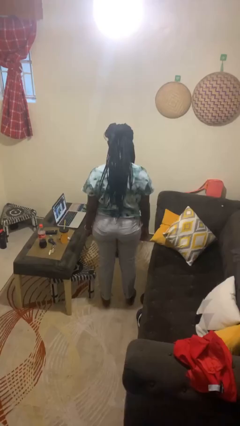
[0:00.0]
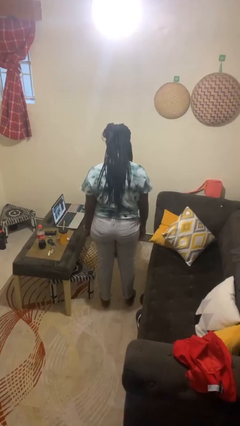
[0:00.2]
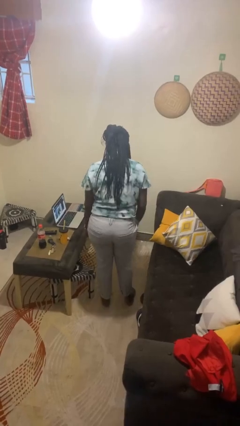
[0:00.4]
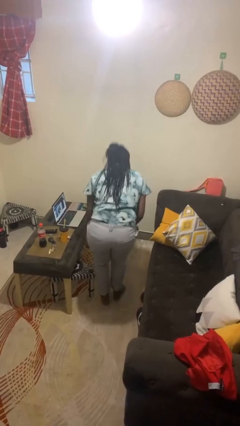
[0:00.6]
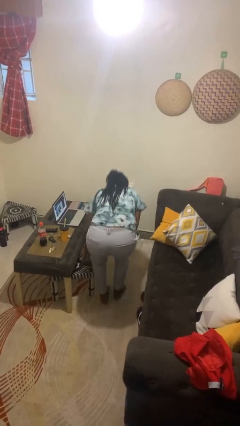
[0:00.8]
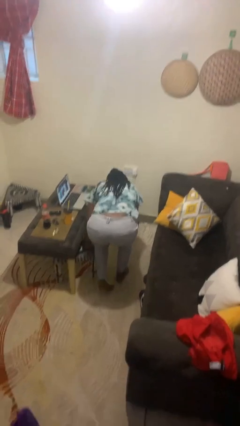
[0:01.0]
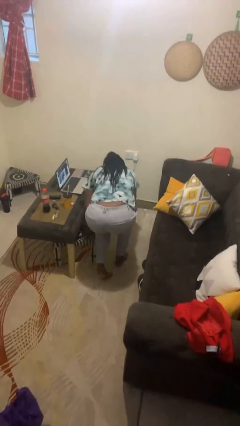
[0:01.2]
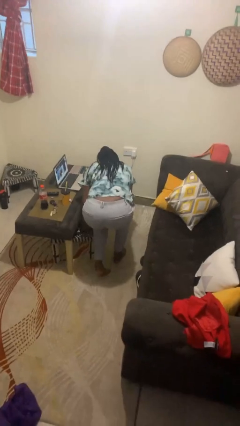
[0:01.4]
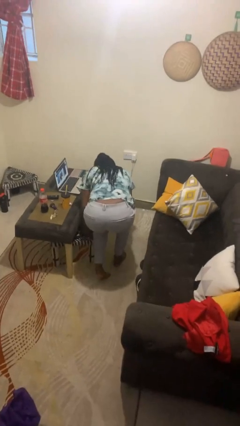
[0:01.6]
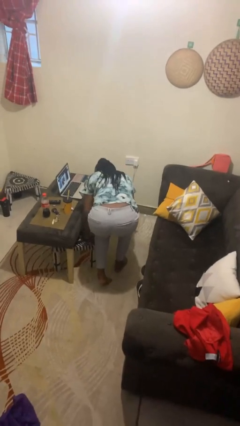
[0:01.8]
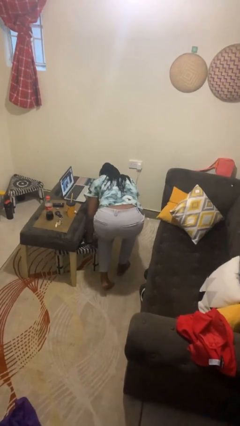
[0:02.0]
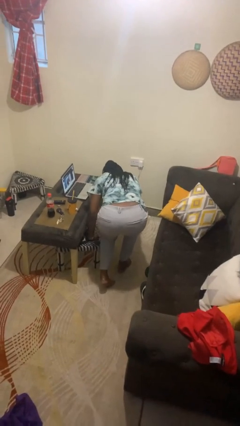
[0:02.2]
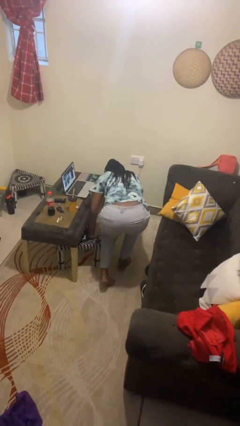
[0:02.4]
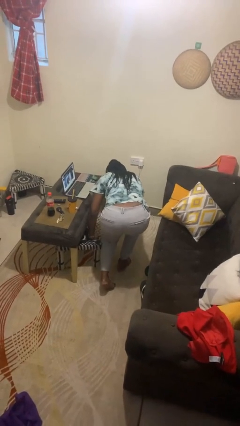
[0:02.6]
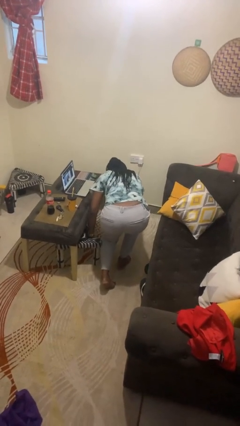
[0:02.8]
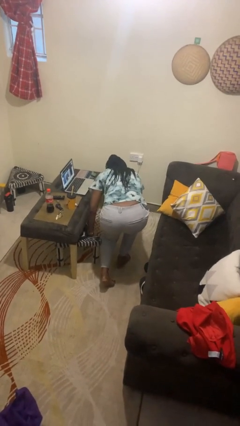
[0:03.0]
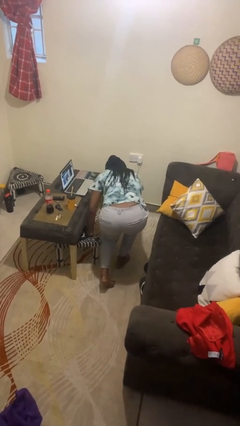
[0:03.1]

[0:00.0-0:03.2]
person trips on object on floor

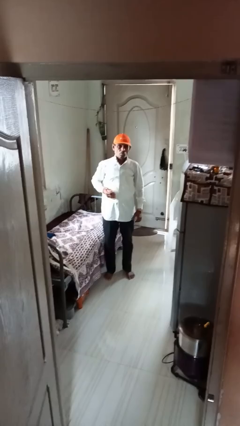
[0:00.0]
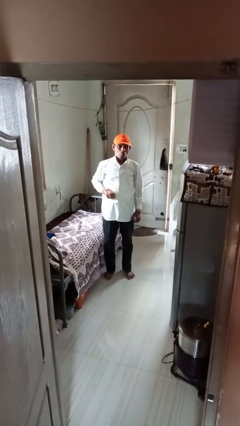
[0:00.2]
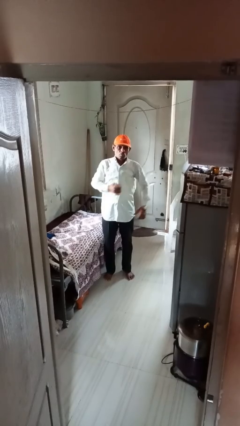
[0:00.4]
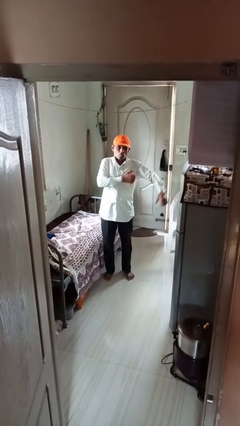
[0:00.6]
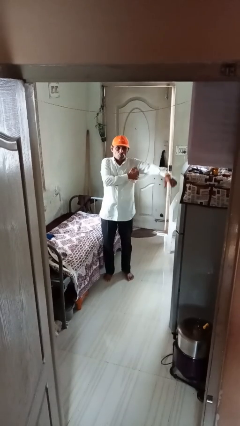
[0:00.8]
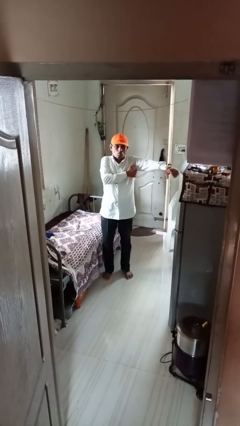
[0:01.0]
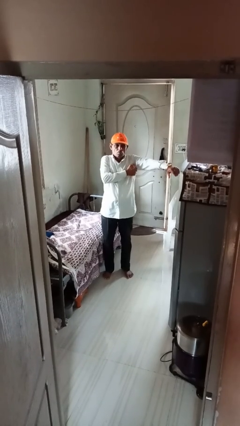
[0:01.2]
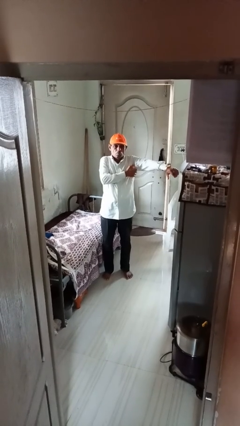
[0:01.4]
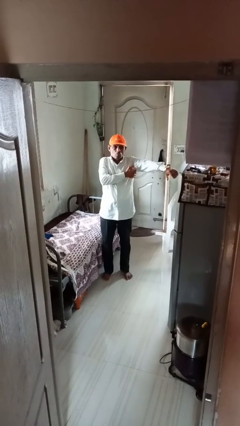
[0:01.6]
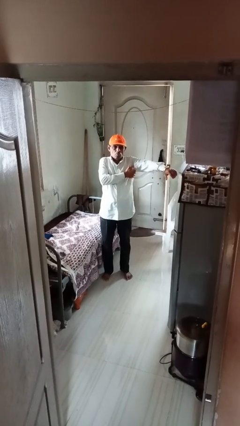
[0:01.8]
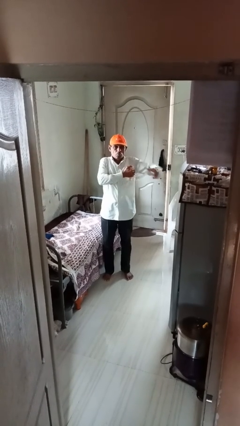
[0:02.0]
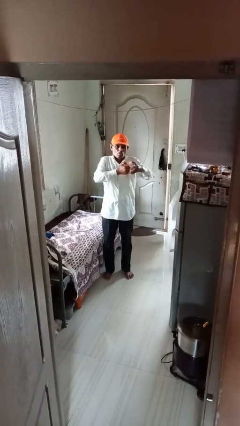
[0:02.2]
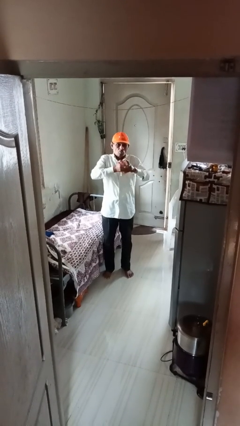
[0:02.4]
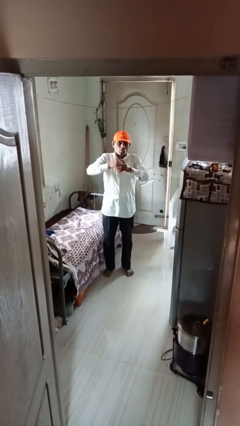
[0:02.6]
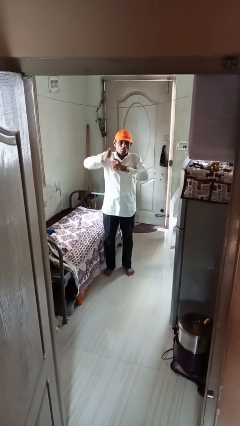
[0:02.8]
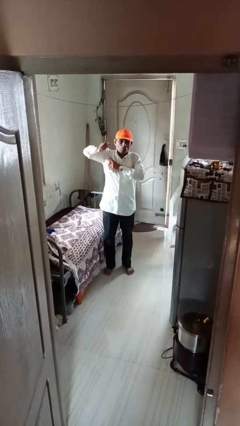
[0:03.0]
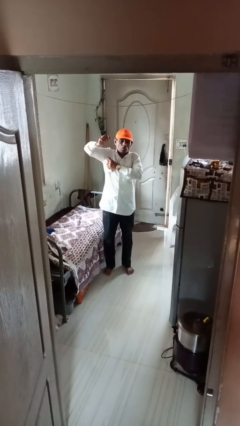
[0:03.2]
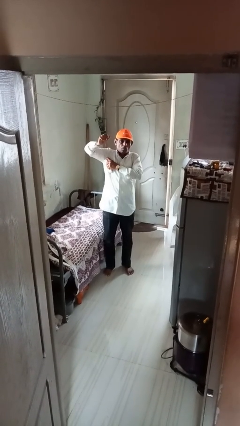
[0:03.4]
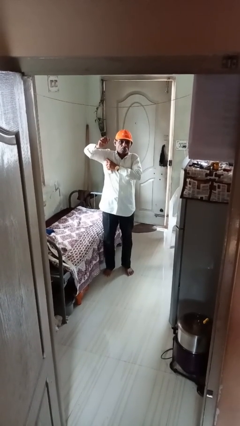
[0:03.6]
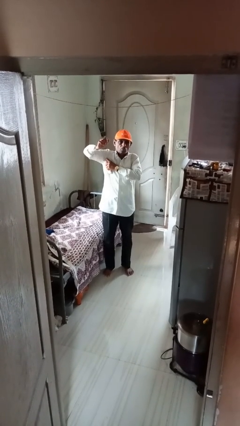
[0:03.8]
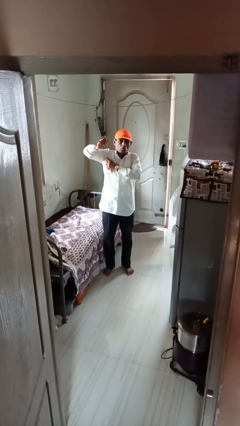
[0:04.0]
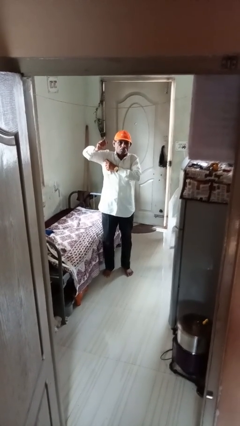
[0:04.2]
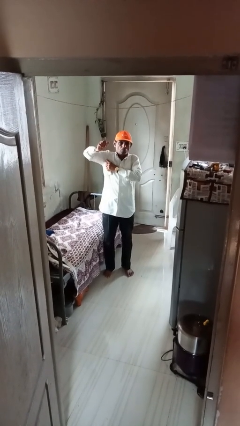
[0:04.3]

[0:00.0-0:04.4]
person applies deodorant

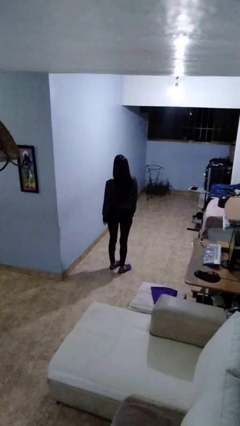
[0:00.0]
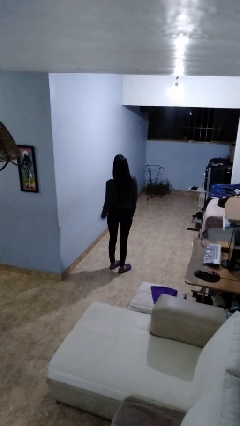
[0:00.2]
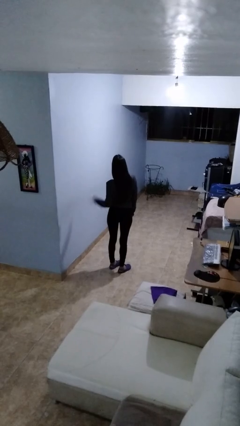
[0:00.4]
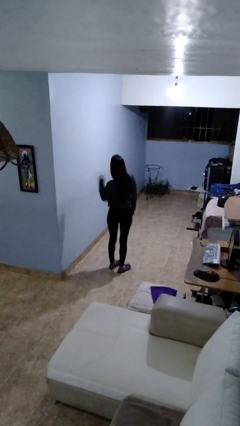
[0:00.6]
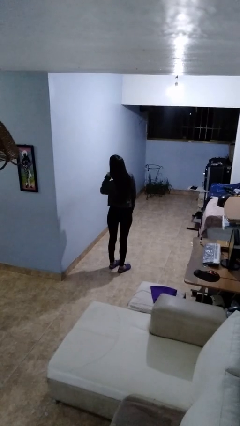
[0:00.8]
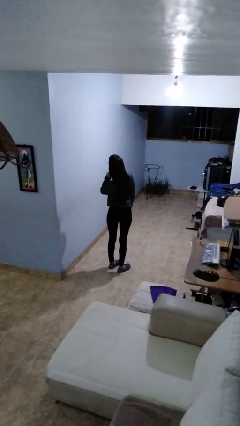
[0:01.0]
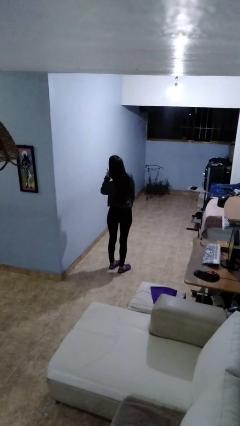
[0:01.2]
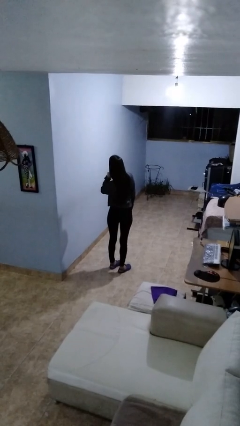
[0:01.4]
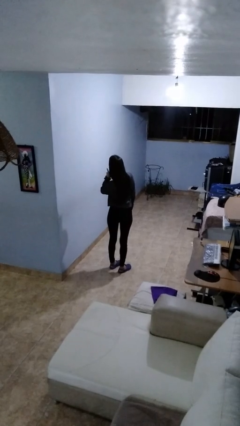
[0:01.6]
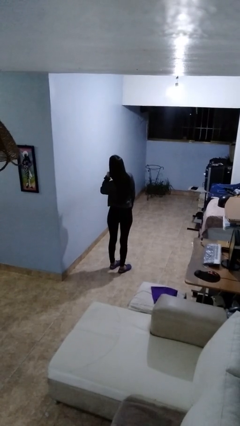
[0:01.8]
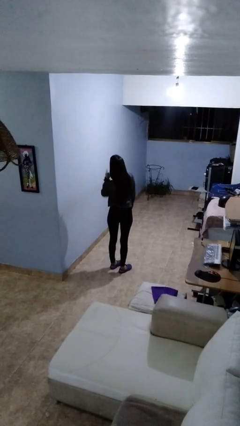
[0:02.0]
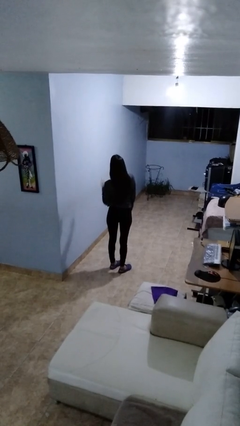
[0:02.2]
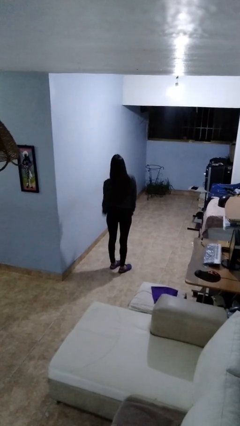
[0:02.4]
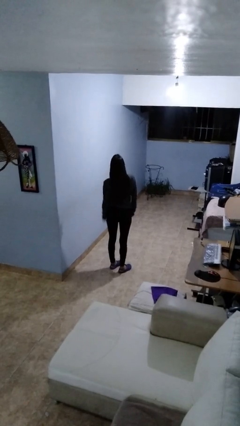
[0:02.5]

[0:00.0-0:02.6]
person gestures listen closely

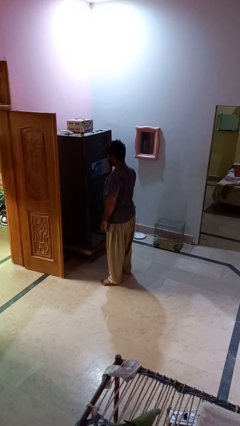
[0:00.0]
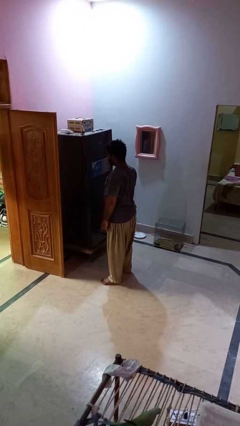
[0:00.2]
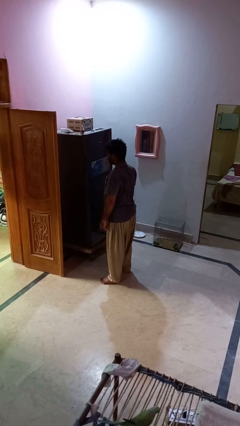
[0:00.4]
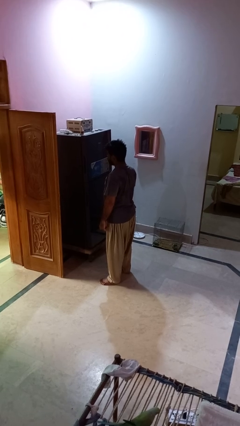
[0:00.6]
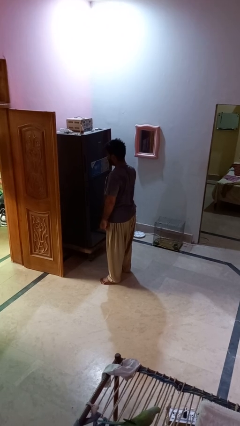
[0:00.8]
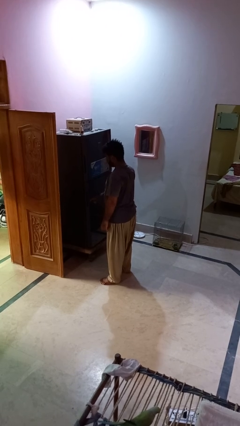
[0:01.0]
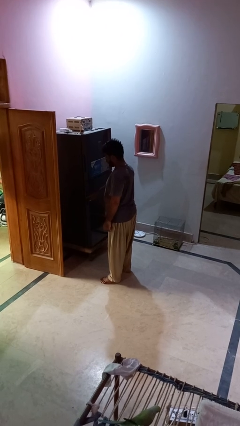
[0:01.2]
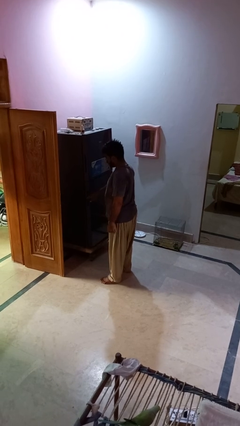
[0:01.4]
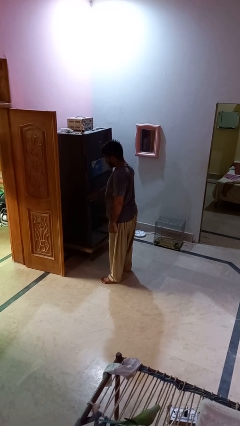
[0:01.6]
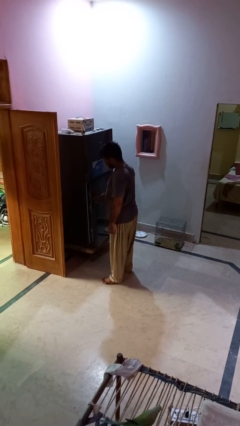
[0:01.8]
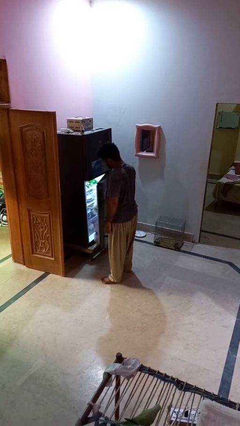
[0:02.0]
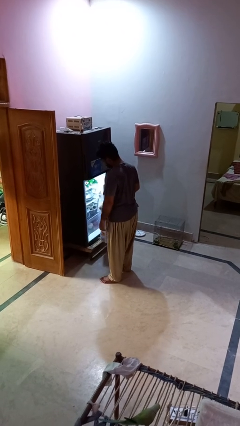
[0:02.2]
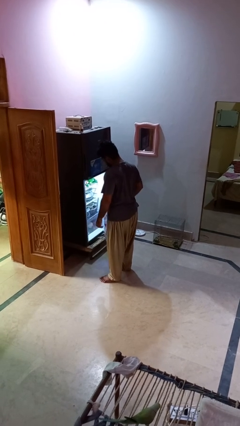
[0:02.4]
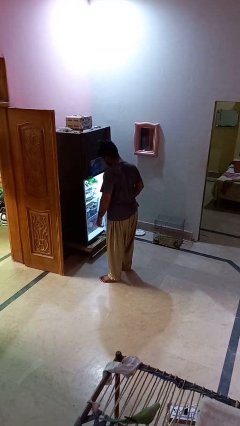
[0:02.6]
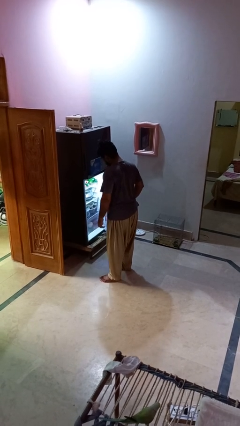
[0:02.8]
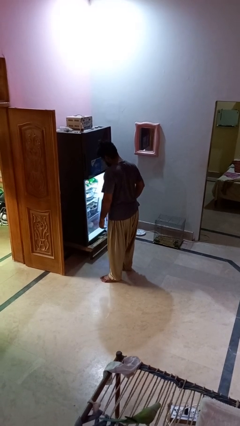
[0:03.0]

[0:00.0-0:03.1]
person opens refrigerator

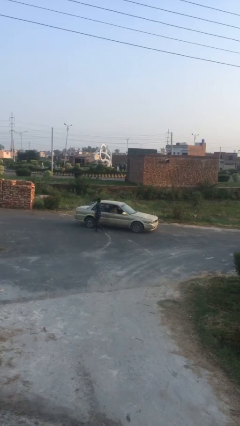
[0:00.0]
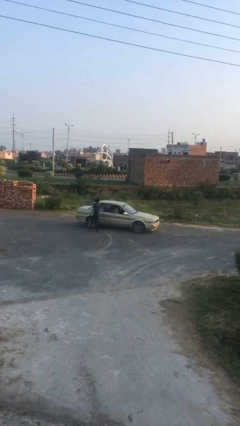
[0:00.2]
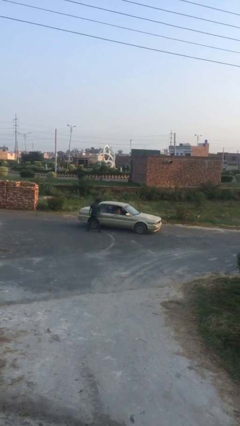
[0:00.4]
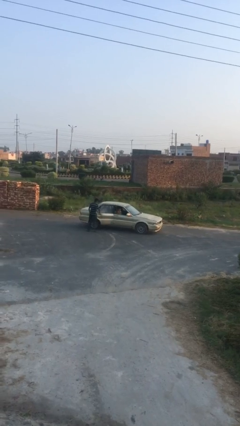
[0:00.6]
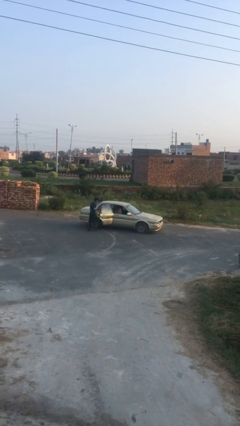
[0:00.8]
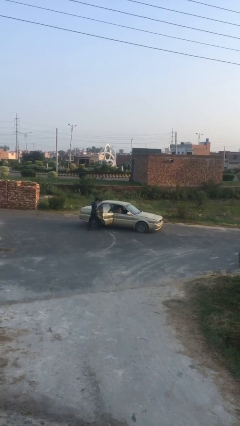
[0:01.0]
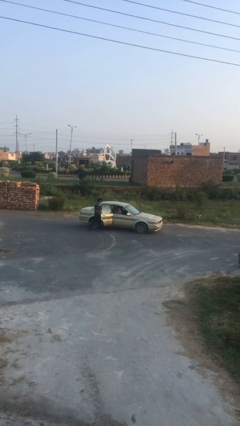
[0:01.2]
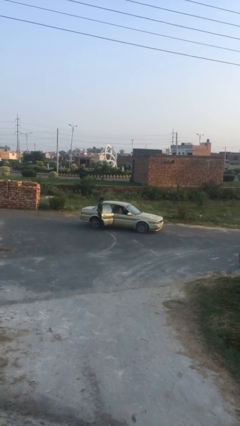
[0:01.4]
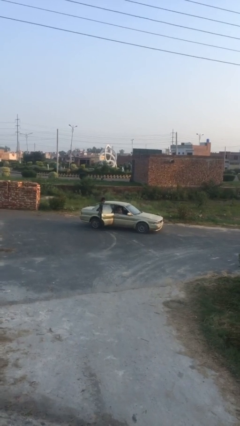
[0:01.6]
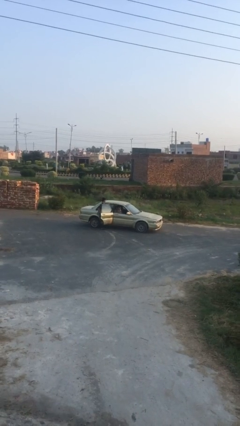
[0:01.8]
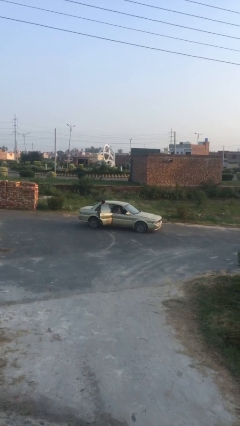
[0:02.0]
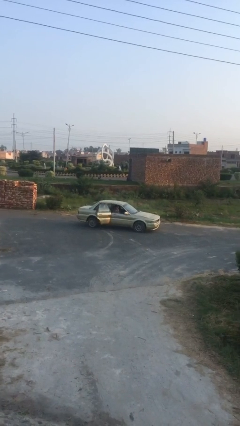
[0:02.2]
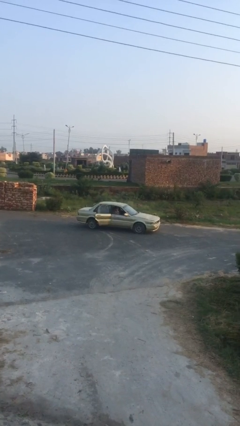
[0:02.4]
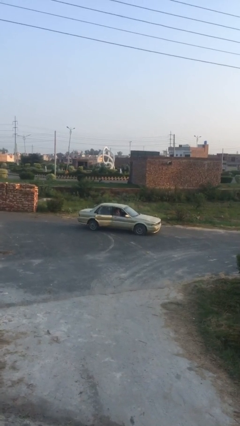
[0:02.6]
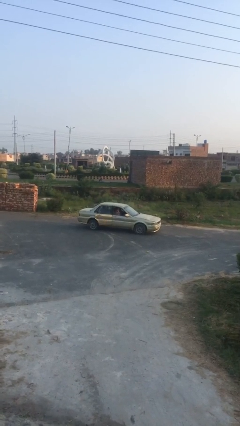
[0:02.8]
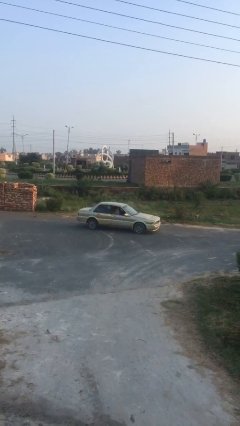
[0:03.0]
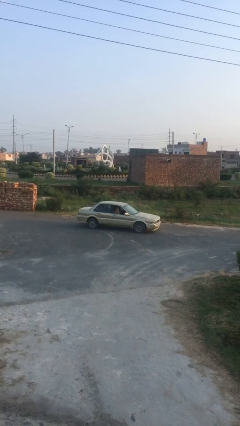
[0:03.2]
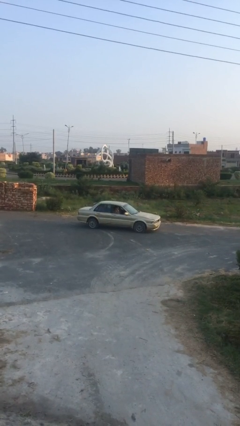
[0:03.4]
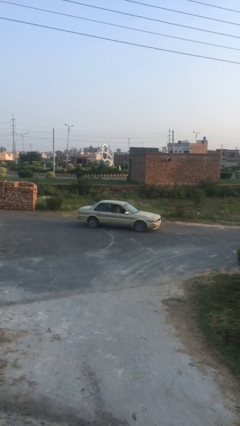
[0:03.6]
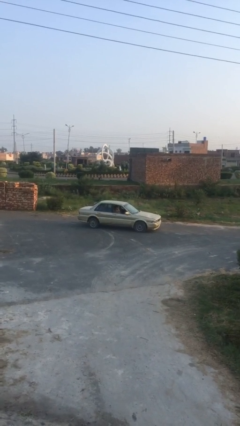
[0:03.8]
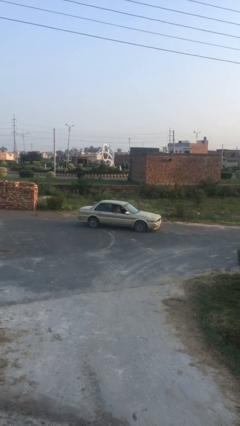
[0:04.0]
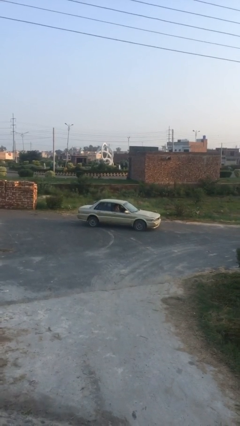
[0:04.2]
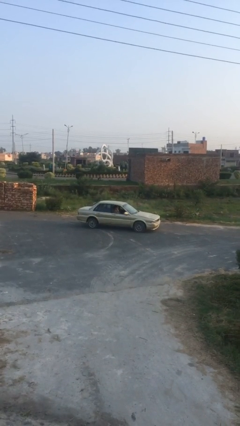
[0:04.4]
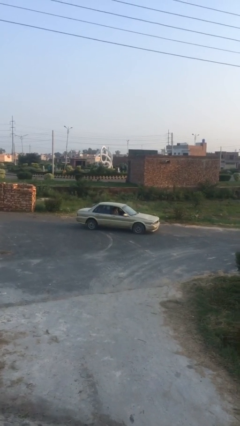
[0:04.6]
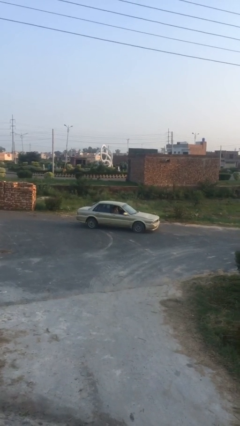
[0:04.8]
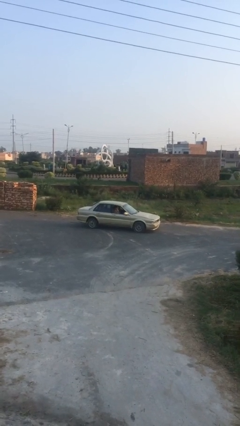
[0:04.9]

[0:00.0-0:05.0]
car picks up person
